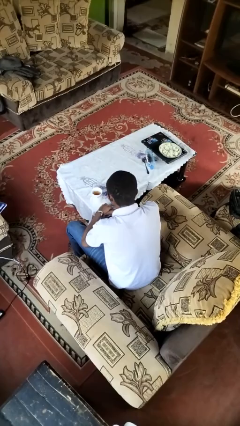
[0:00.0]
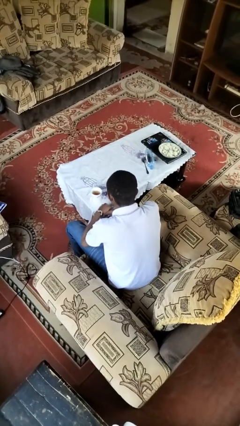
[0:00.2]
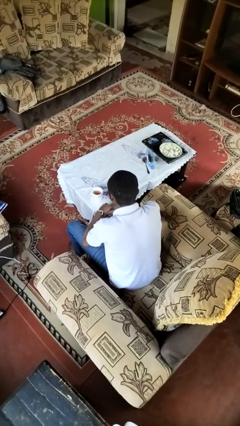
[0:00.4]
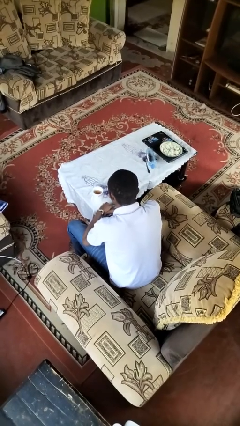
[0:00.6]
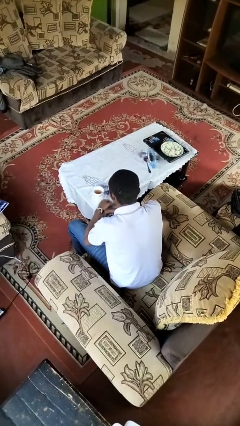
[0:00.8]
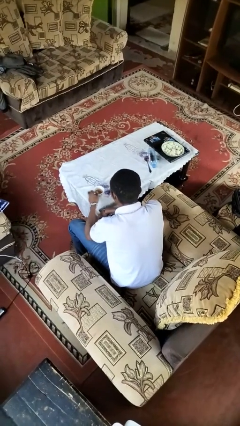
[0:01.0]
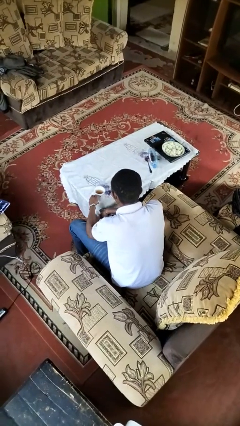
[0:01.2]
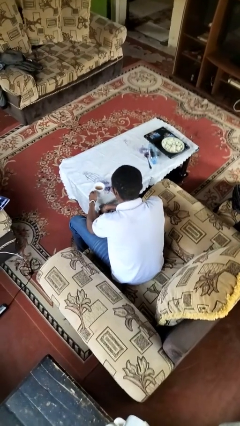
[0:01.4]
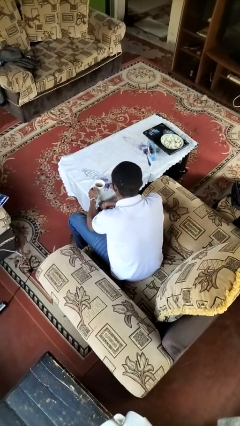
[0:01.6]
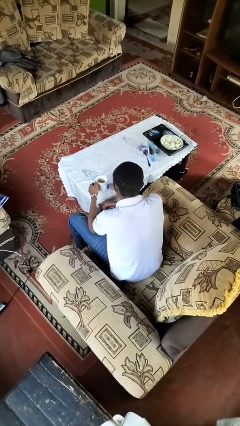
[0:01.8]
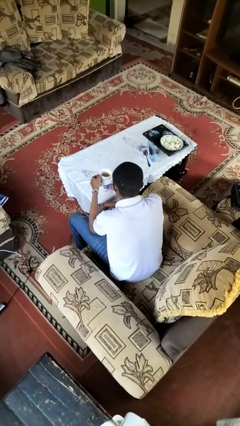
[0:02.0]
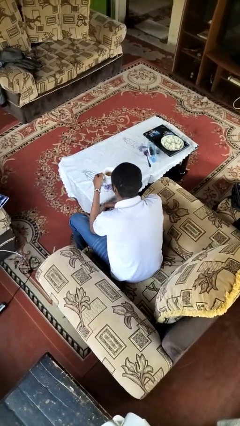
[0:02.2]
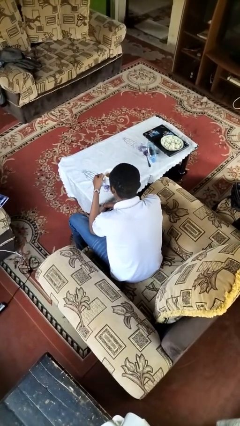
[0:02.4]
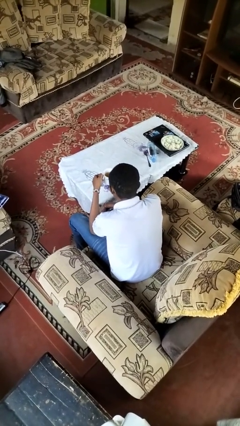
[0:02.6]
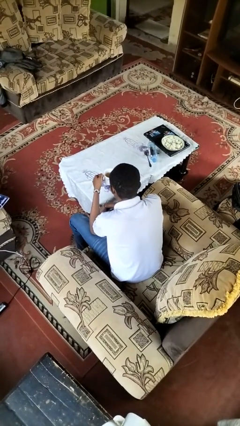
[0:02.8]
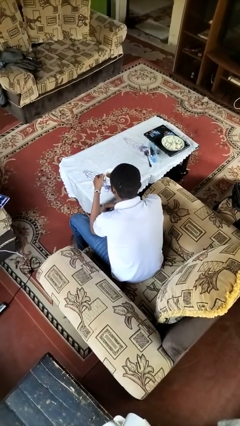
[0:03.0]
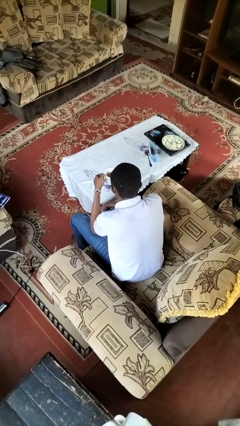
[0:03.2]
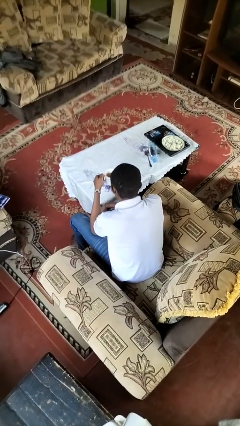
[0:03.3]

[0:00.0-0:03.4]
person picks up object from table

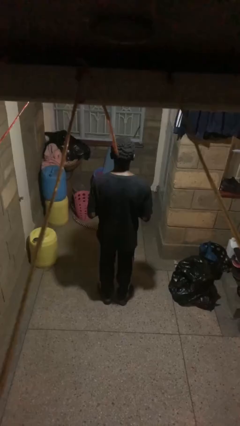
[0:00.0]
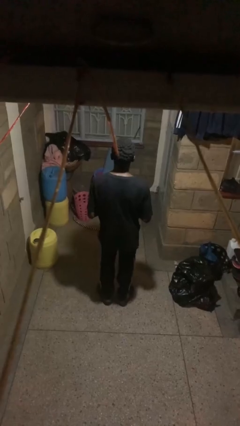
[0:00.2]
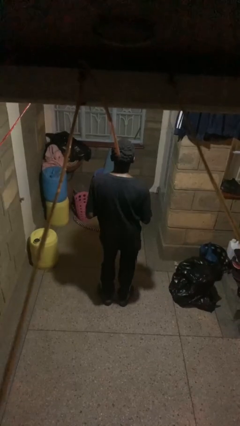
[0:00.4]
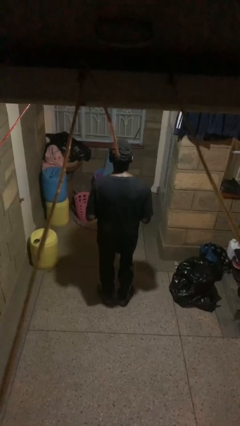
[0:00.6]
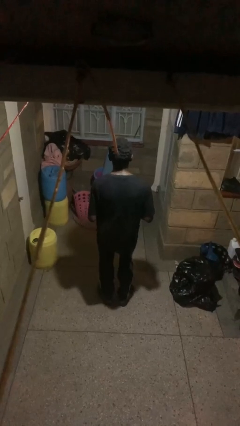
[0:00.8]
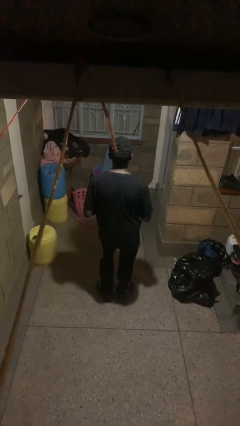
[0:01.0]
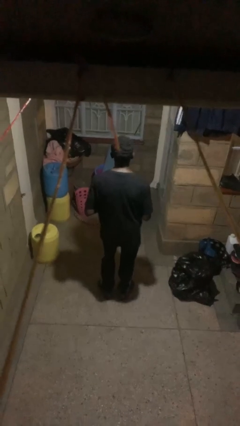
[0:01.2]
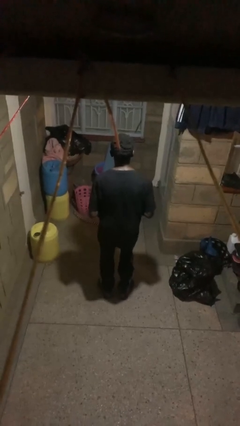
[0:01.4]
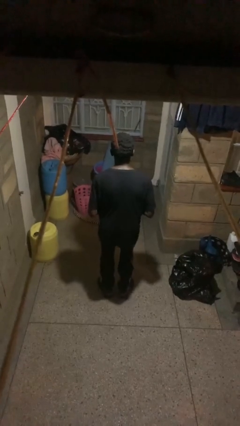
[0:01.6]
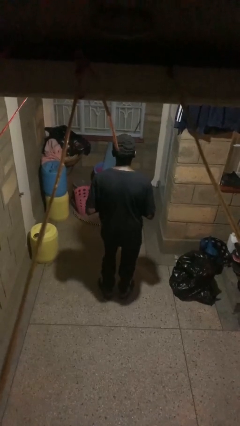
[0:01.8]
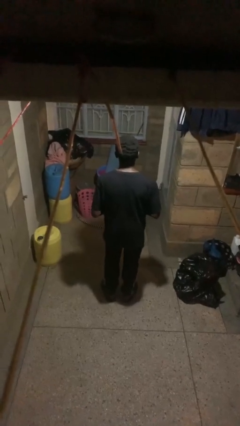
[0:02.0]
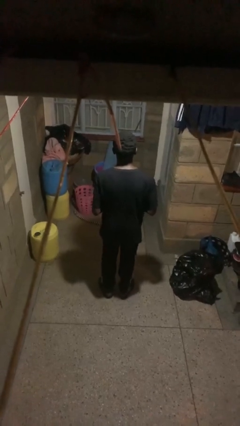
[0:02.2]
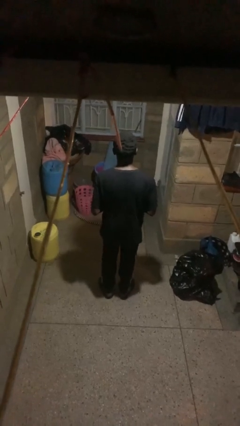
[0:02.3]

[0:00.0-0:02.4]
person wiggles hips

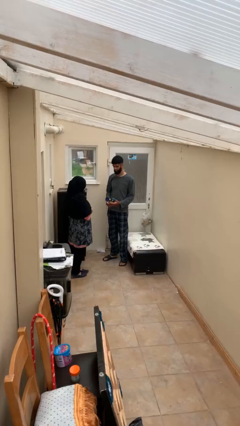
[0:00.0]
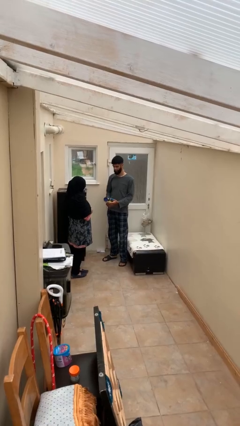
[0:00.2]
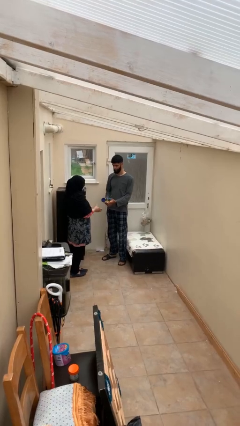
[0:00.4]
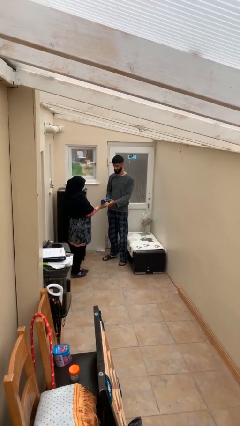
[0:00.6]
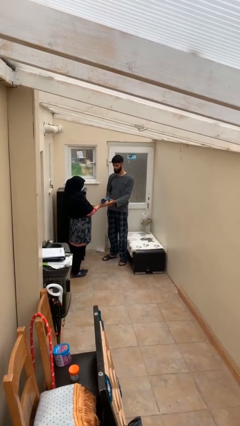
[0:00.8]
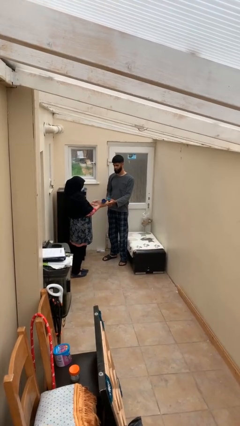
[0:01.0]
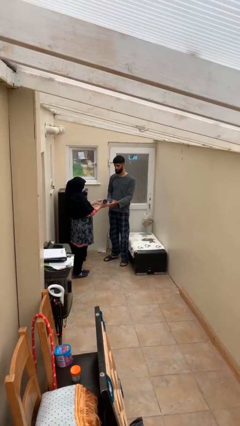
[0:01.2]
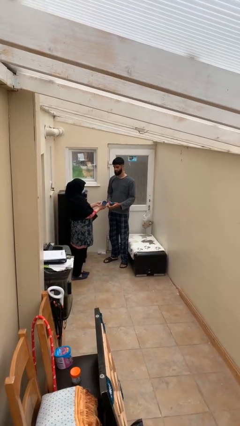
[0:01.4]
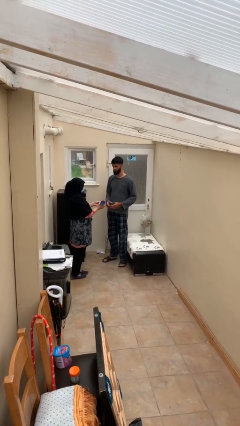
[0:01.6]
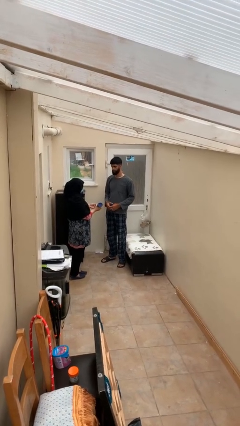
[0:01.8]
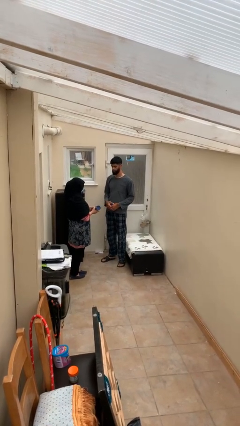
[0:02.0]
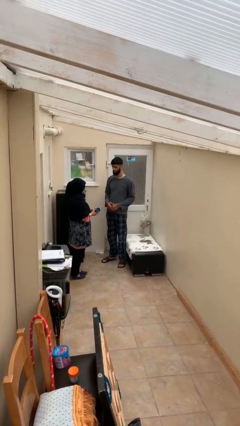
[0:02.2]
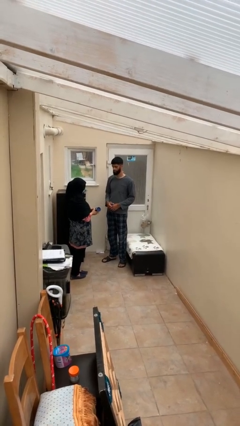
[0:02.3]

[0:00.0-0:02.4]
person transfers object to person

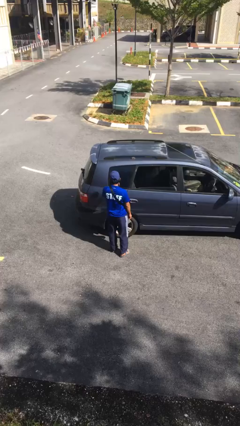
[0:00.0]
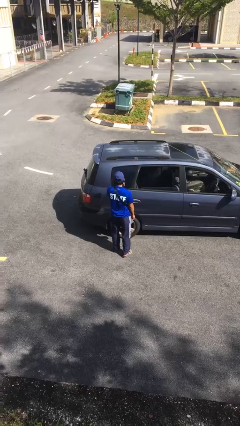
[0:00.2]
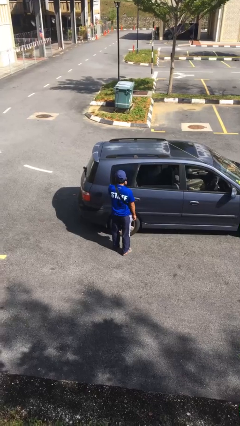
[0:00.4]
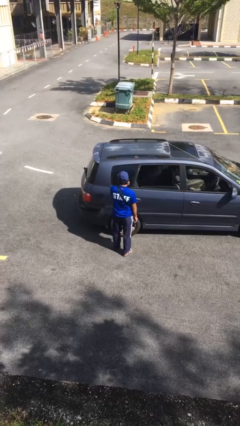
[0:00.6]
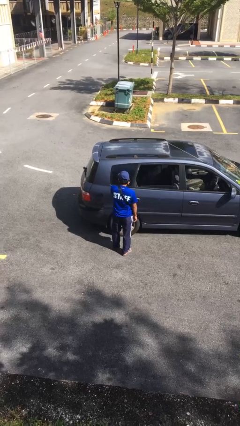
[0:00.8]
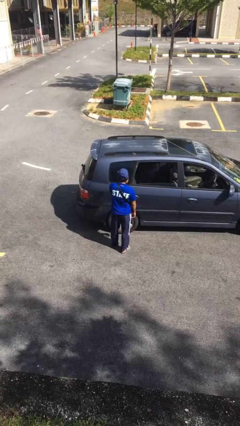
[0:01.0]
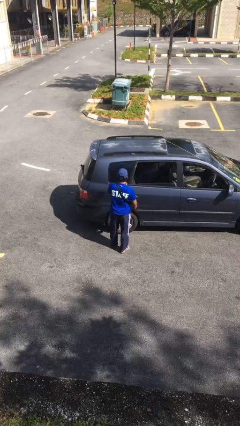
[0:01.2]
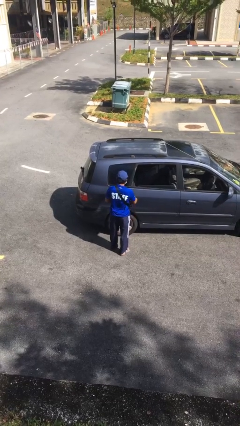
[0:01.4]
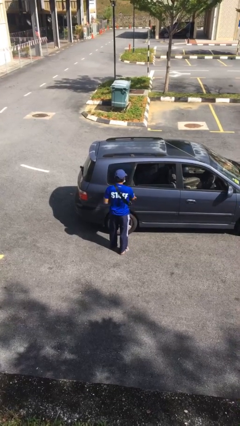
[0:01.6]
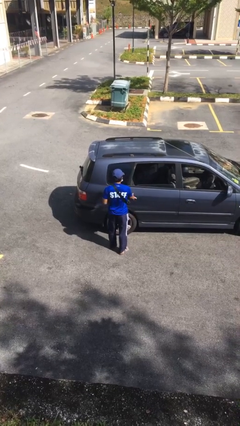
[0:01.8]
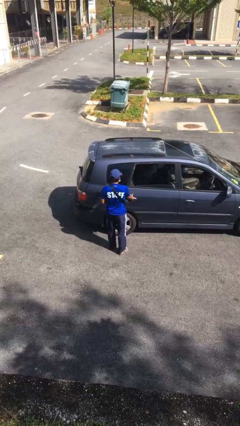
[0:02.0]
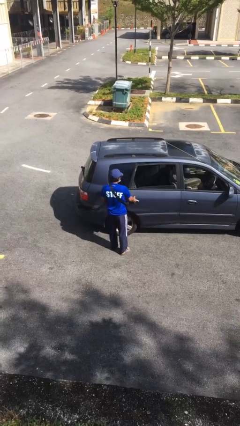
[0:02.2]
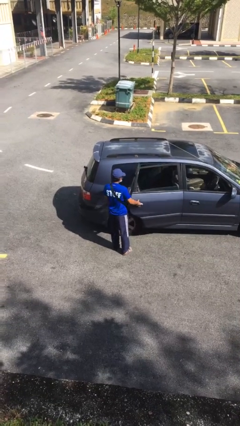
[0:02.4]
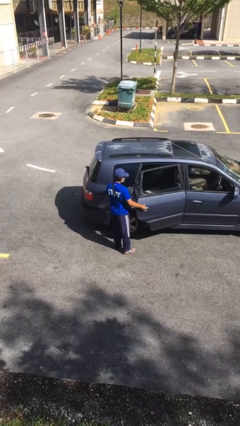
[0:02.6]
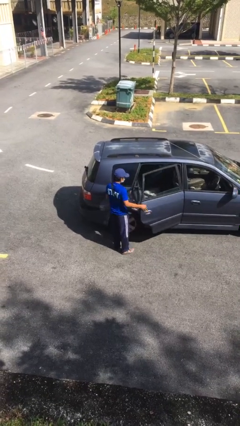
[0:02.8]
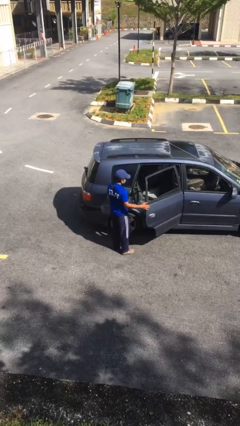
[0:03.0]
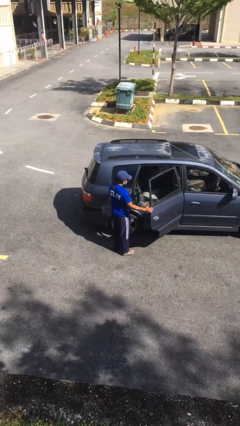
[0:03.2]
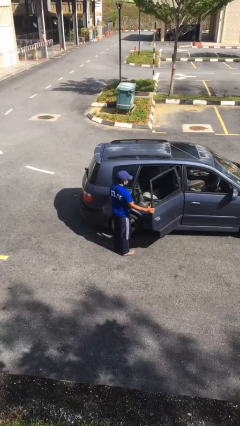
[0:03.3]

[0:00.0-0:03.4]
person opens car door

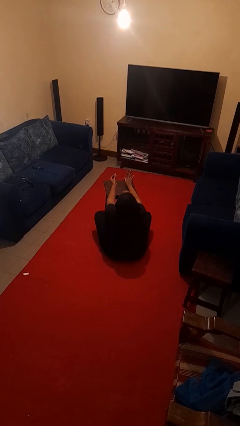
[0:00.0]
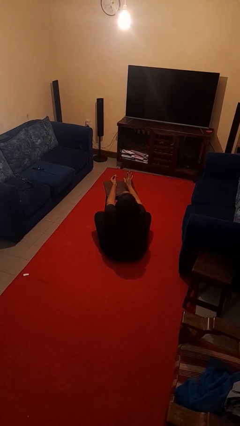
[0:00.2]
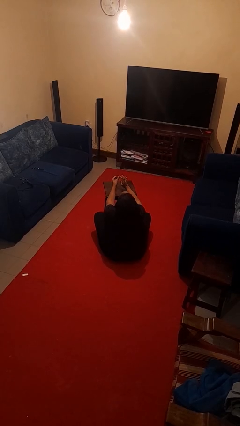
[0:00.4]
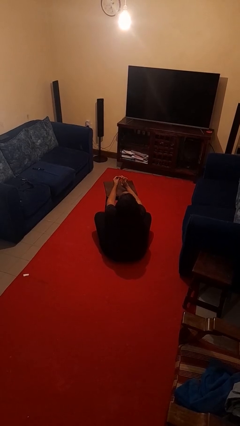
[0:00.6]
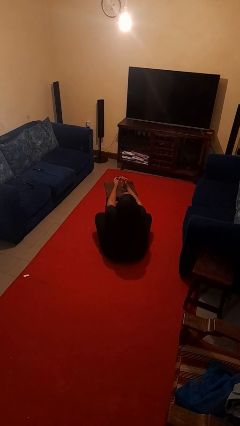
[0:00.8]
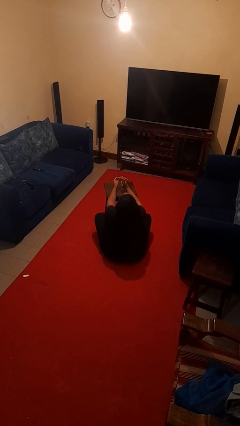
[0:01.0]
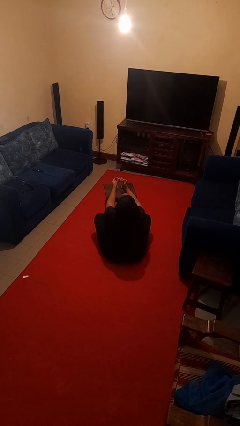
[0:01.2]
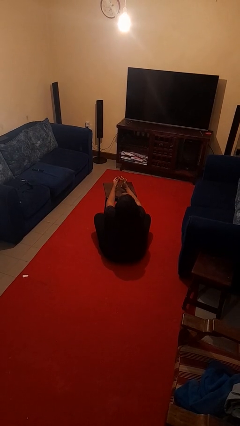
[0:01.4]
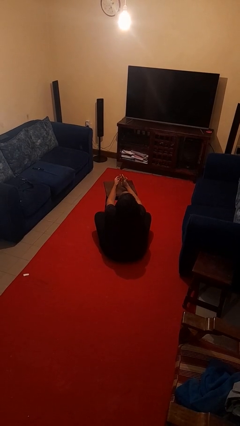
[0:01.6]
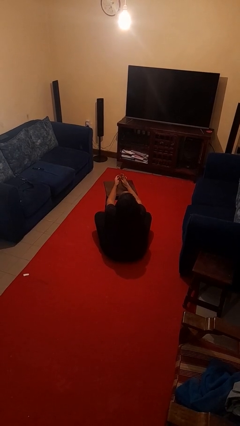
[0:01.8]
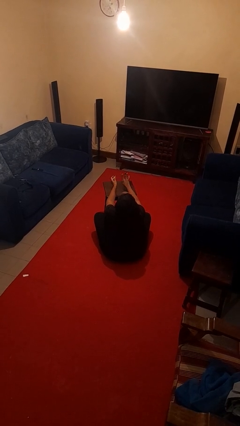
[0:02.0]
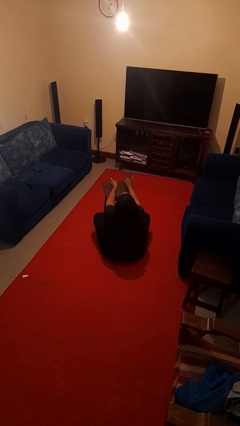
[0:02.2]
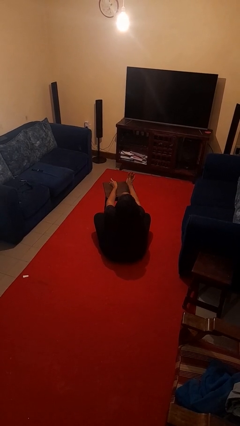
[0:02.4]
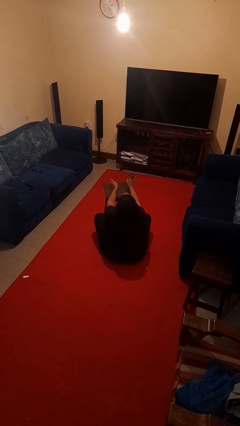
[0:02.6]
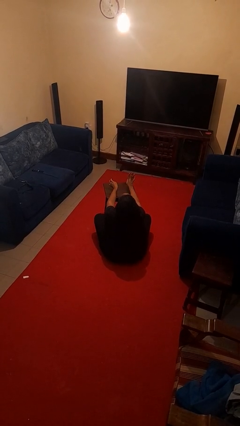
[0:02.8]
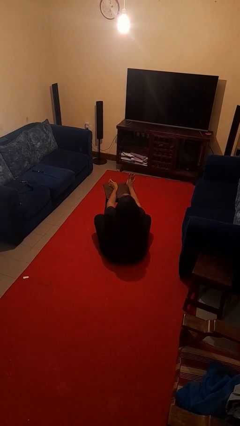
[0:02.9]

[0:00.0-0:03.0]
person puts on ring

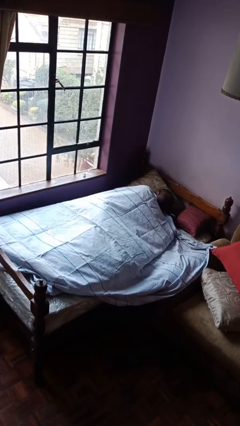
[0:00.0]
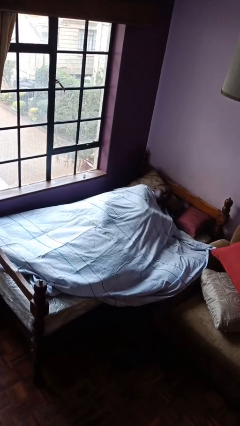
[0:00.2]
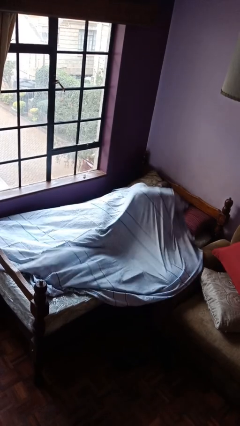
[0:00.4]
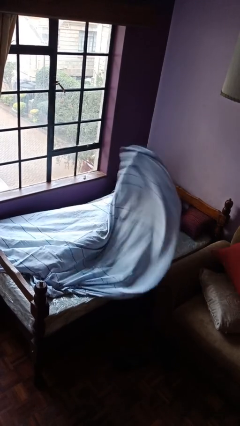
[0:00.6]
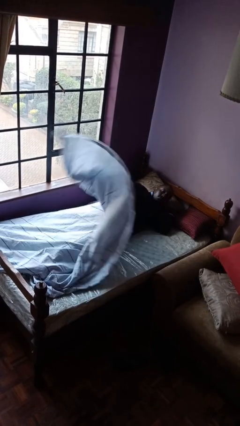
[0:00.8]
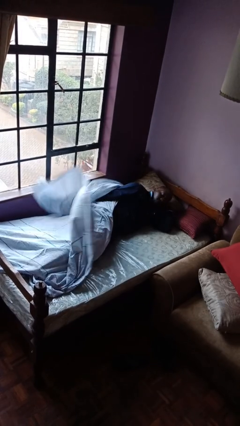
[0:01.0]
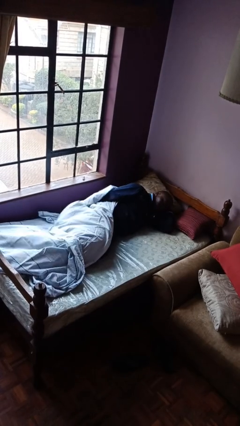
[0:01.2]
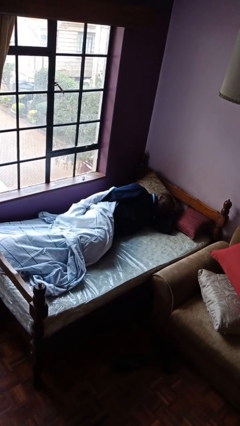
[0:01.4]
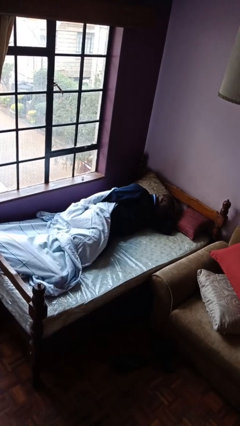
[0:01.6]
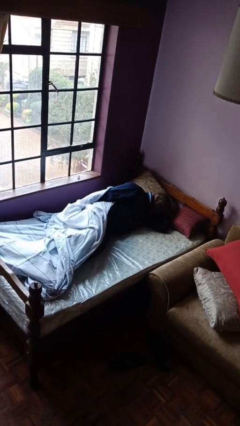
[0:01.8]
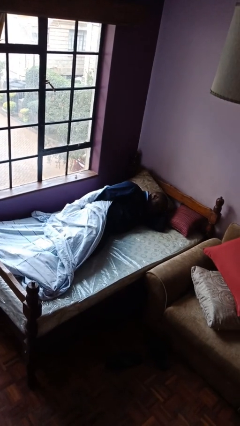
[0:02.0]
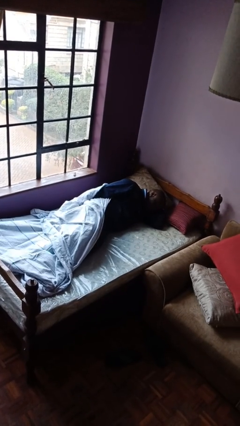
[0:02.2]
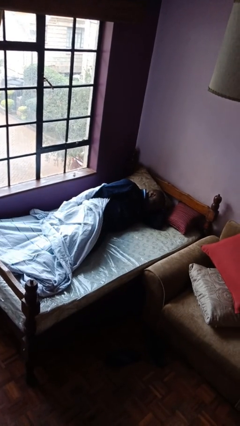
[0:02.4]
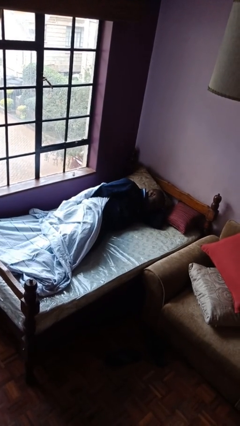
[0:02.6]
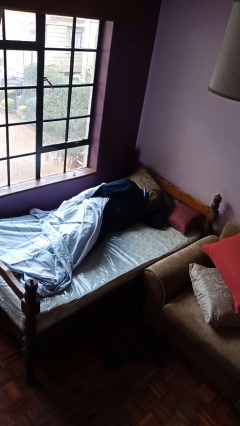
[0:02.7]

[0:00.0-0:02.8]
person uncovers with bedsheets
